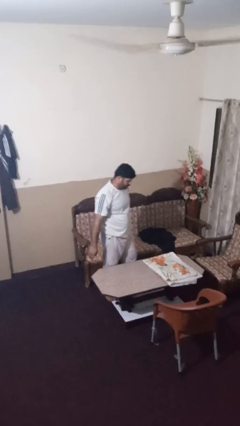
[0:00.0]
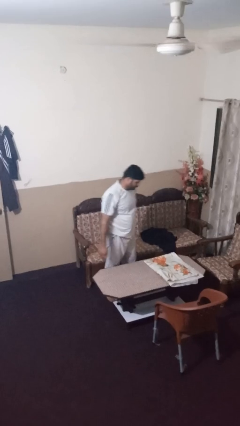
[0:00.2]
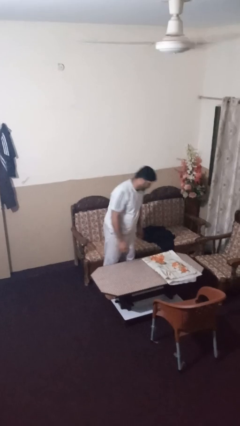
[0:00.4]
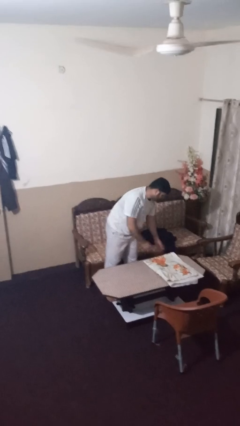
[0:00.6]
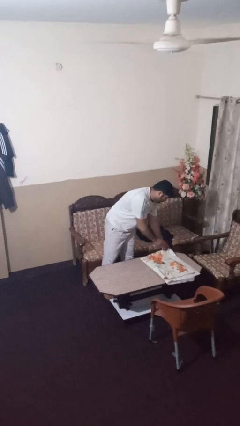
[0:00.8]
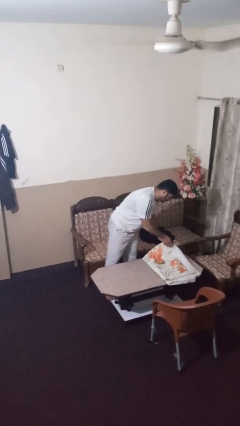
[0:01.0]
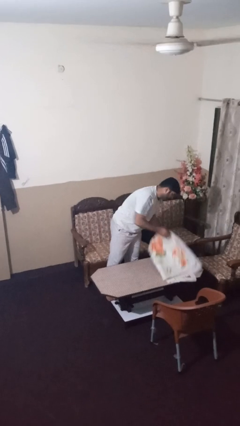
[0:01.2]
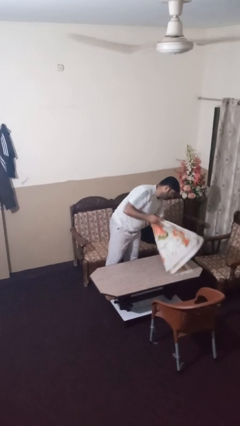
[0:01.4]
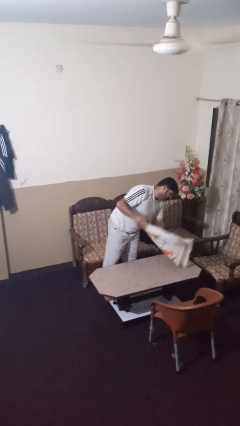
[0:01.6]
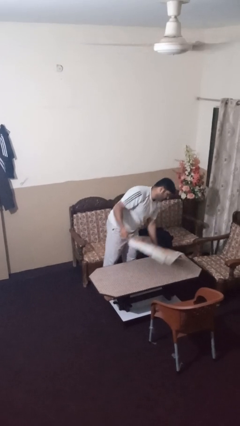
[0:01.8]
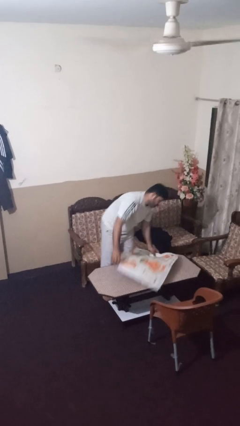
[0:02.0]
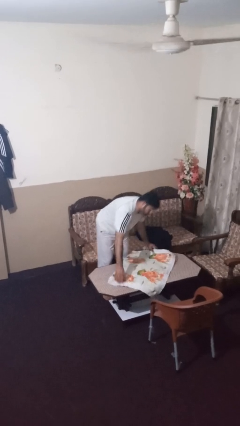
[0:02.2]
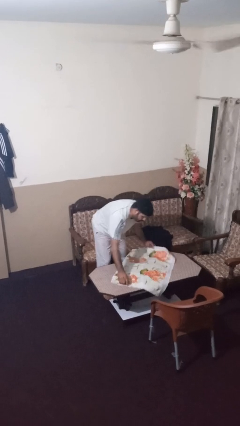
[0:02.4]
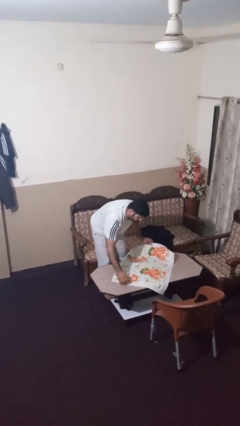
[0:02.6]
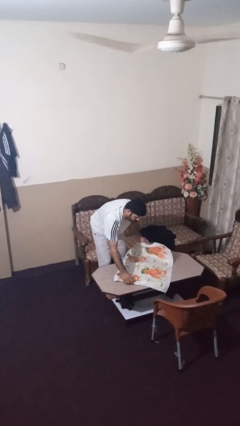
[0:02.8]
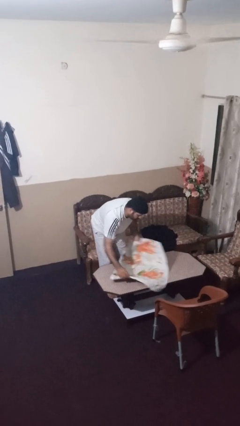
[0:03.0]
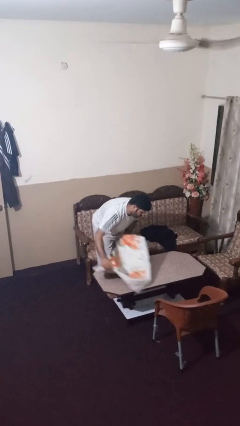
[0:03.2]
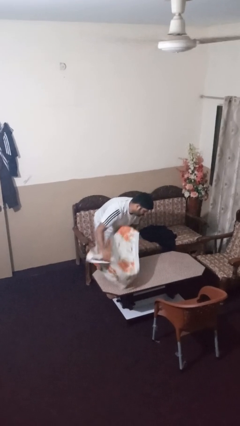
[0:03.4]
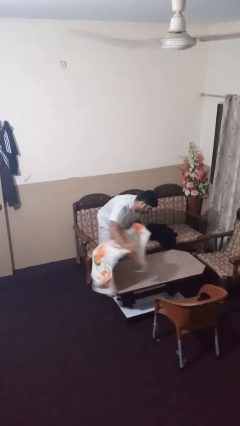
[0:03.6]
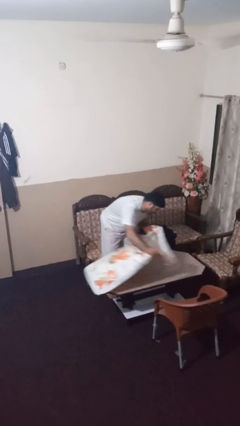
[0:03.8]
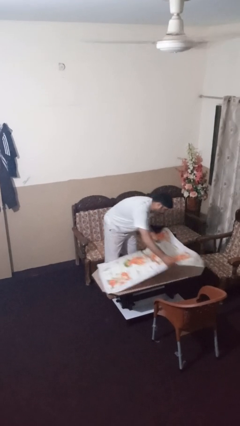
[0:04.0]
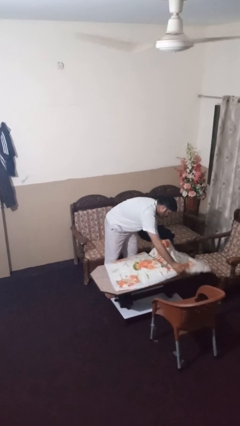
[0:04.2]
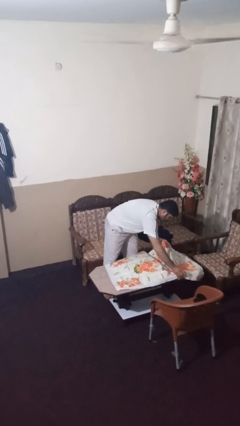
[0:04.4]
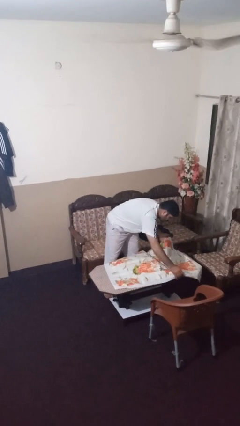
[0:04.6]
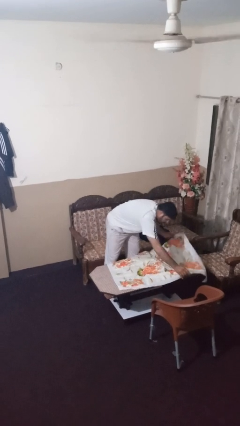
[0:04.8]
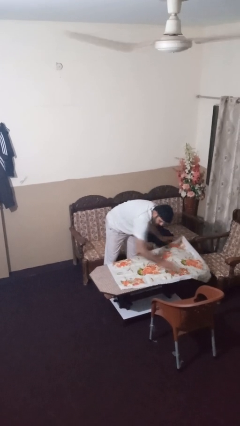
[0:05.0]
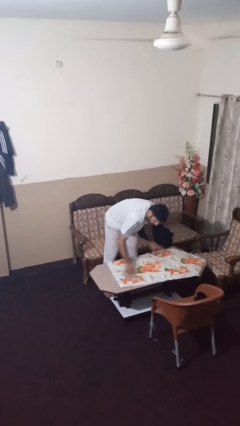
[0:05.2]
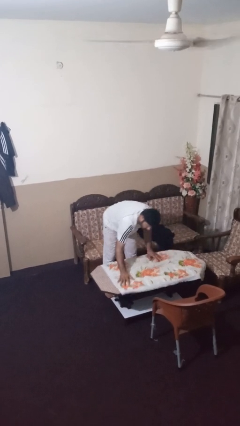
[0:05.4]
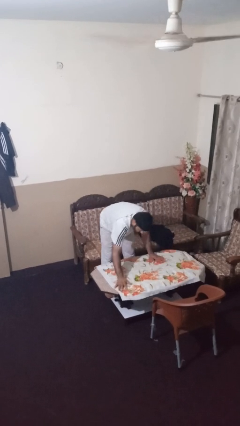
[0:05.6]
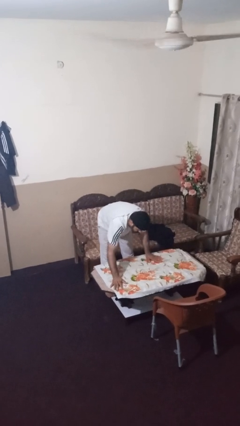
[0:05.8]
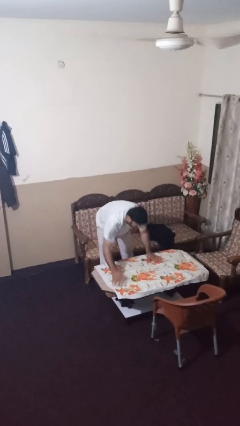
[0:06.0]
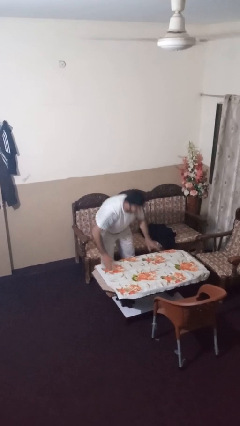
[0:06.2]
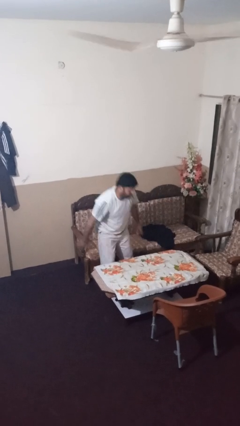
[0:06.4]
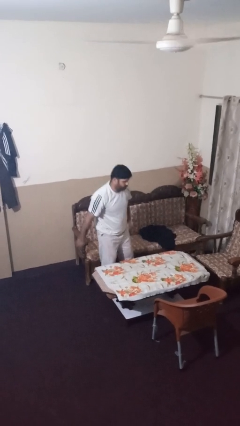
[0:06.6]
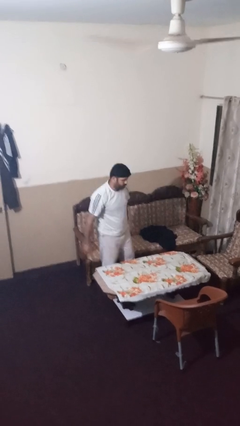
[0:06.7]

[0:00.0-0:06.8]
person spreads tablecloth

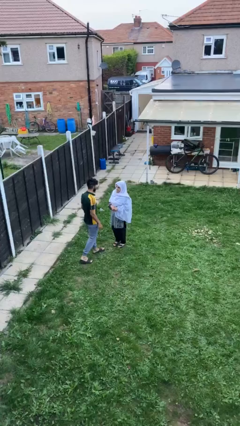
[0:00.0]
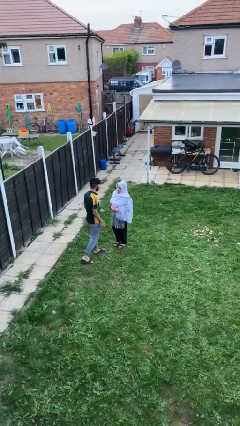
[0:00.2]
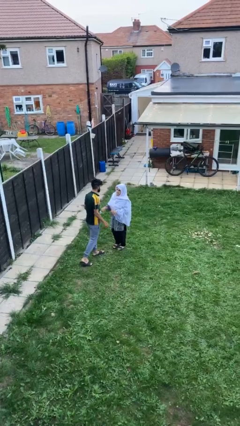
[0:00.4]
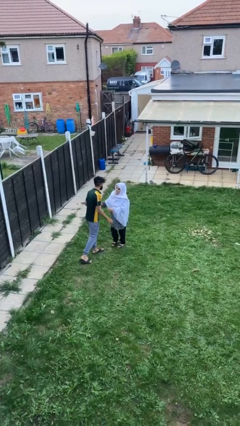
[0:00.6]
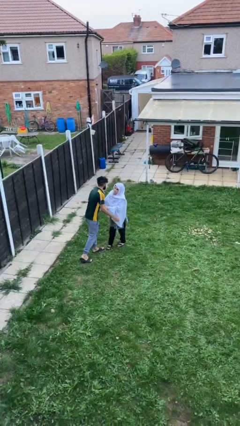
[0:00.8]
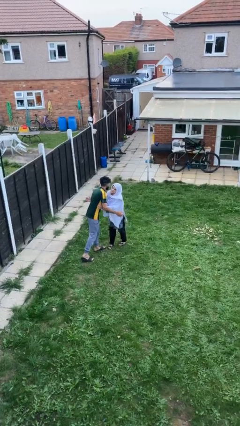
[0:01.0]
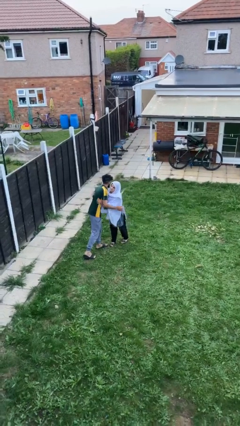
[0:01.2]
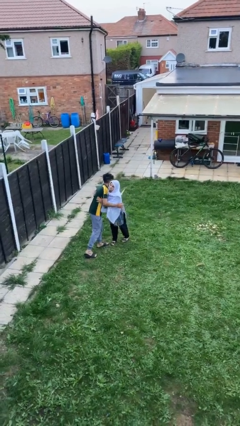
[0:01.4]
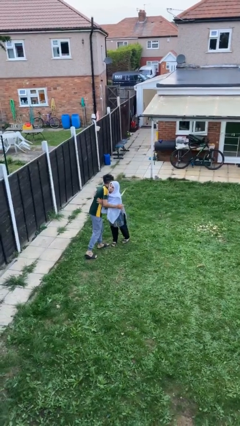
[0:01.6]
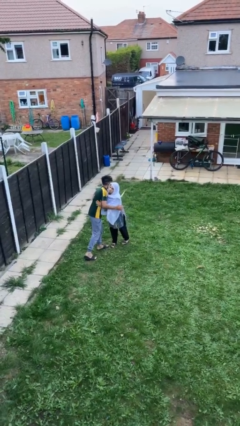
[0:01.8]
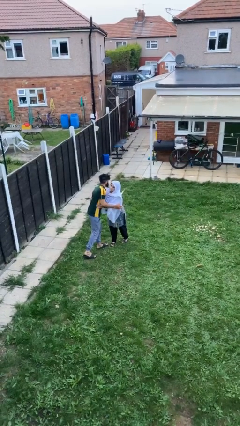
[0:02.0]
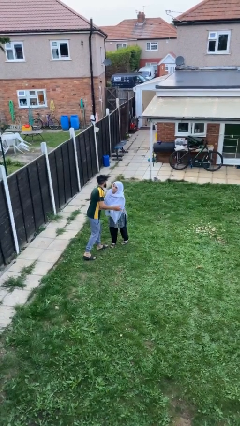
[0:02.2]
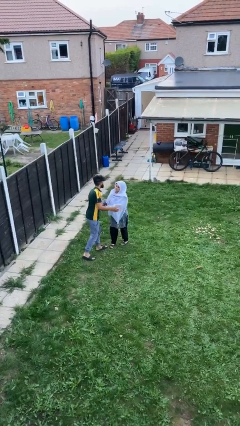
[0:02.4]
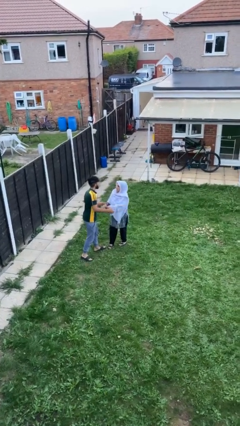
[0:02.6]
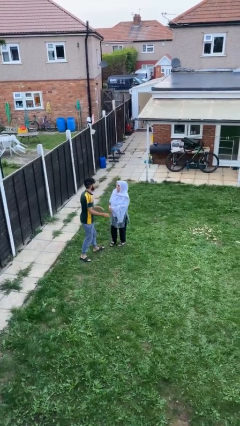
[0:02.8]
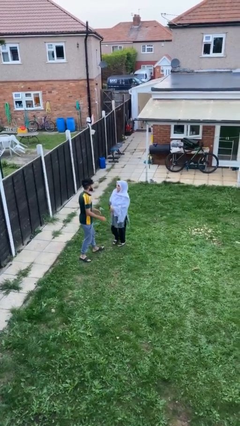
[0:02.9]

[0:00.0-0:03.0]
person embraces person

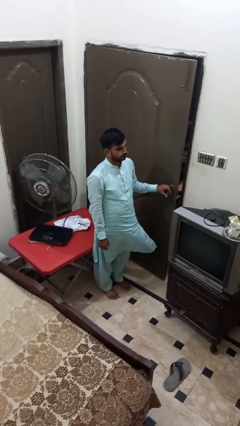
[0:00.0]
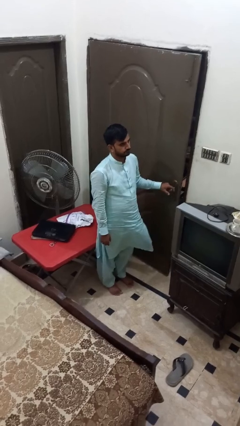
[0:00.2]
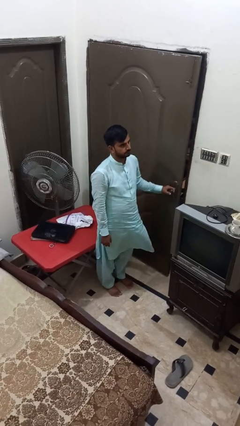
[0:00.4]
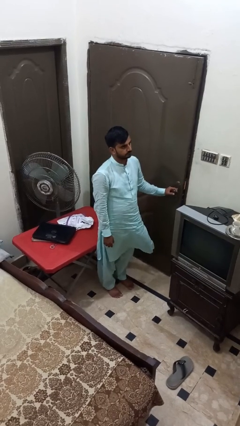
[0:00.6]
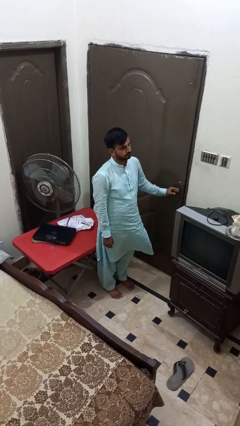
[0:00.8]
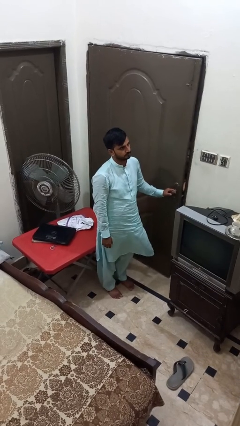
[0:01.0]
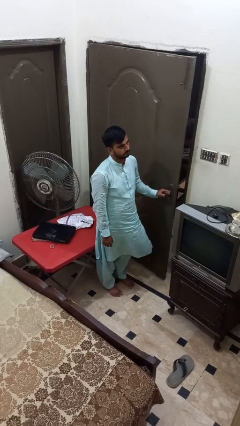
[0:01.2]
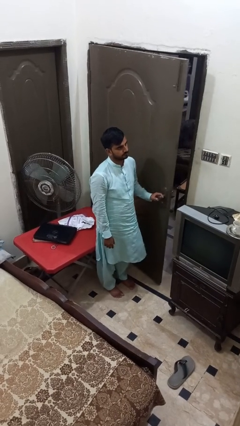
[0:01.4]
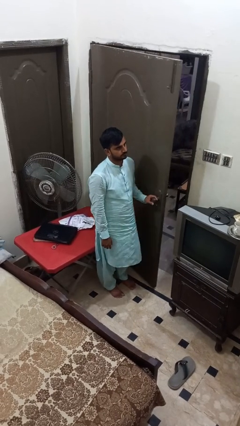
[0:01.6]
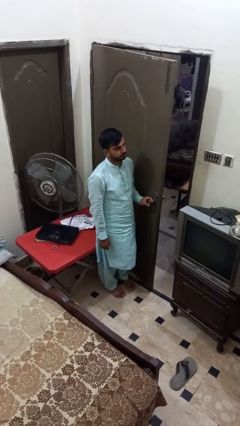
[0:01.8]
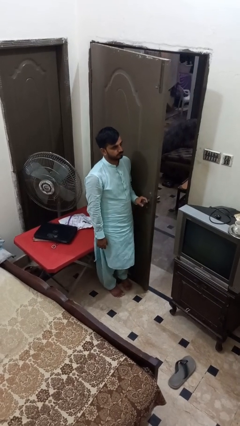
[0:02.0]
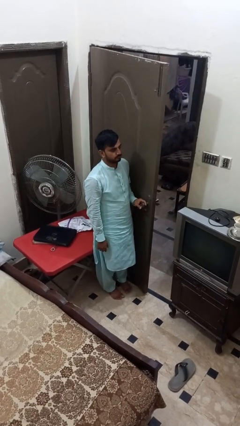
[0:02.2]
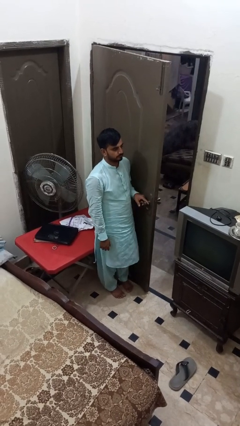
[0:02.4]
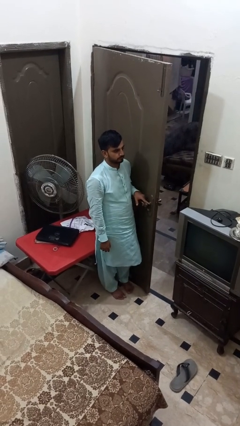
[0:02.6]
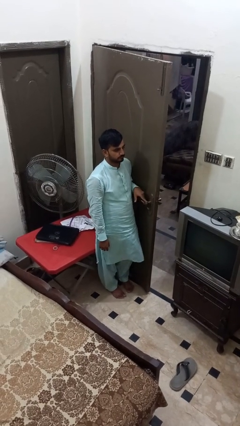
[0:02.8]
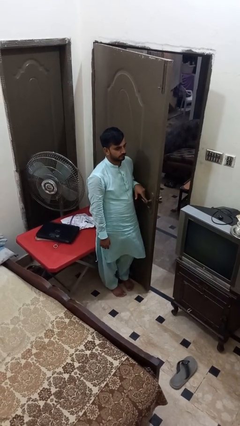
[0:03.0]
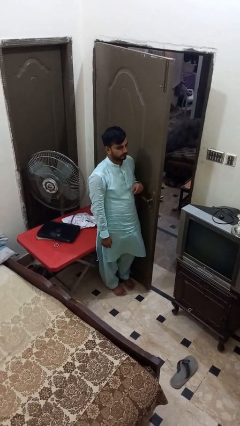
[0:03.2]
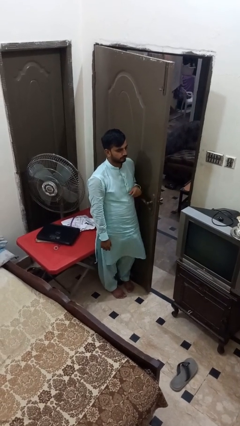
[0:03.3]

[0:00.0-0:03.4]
person opens facility door

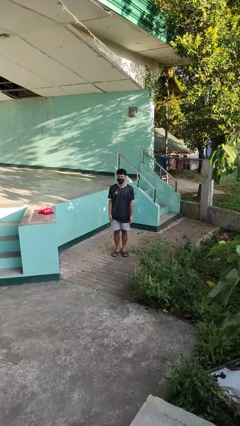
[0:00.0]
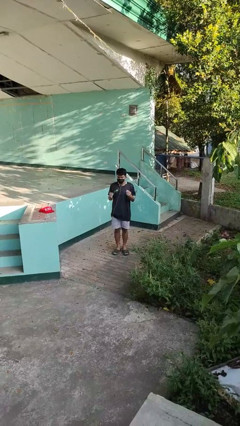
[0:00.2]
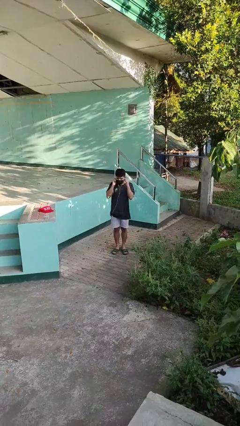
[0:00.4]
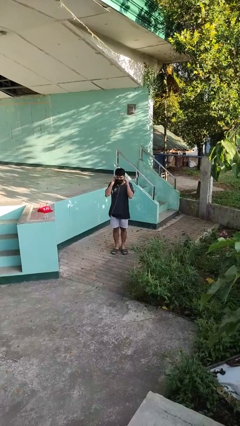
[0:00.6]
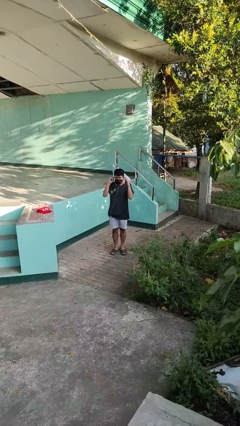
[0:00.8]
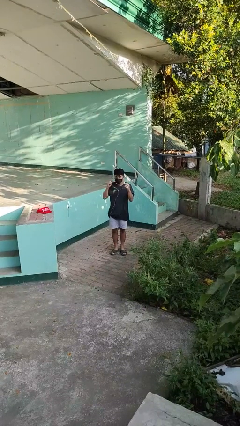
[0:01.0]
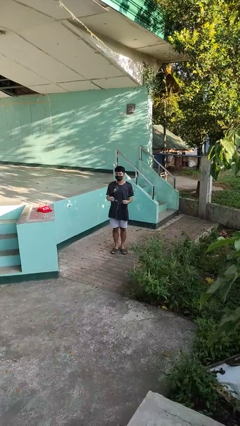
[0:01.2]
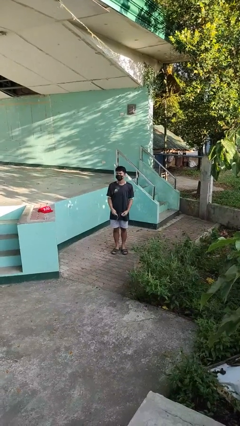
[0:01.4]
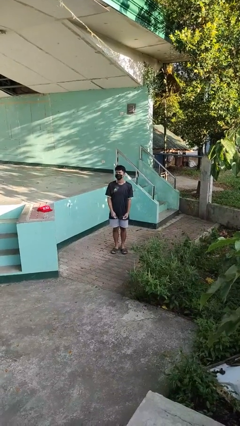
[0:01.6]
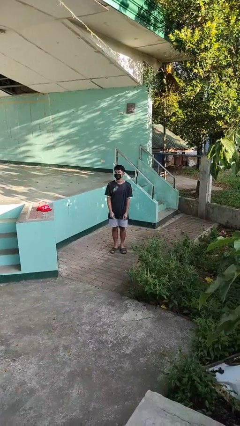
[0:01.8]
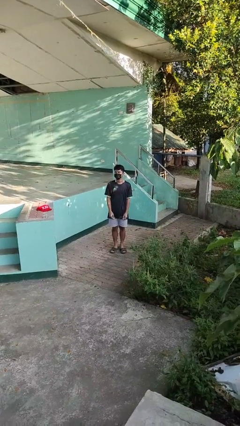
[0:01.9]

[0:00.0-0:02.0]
person takes off headphones

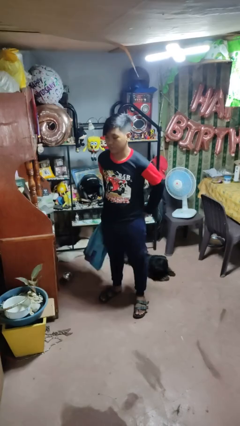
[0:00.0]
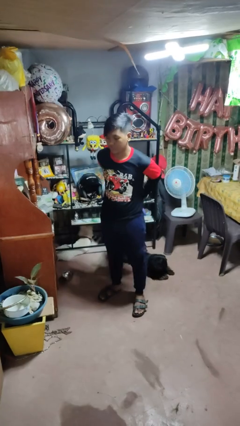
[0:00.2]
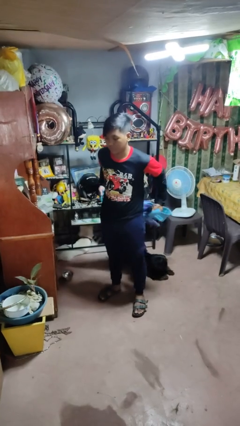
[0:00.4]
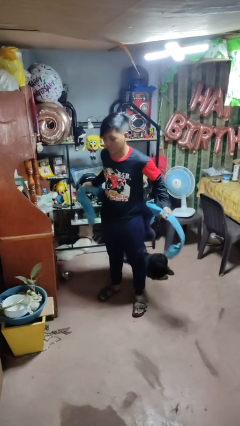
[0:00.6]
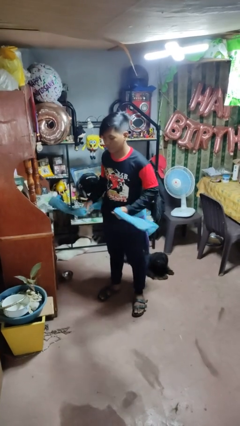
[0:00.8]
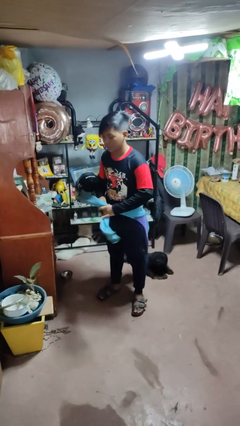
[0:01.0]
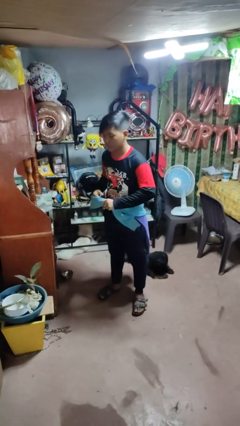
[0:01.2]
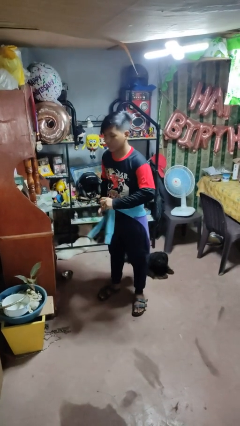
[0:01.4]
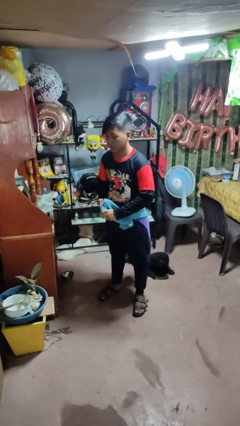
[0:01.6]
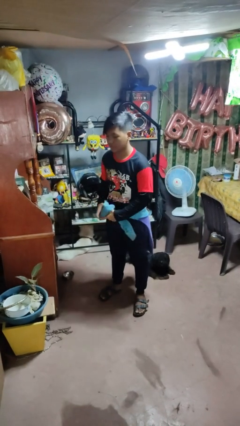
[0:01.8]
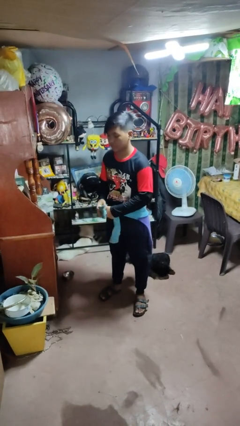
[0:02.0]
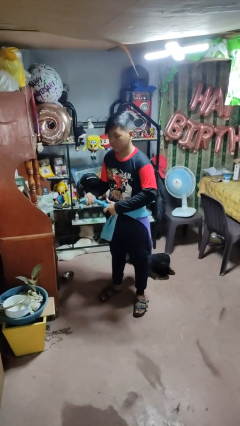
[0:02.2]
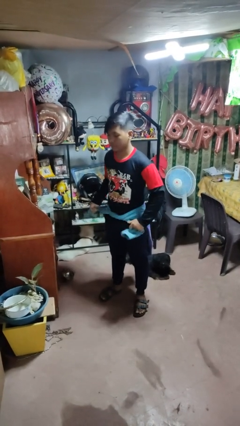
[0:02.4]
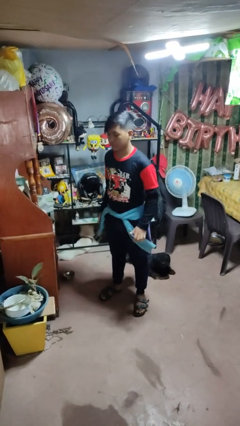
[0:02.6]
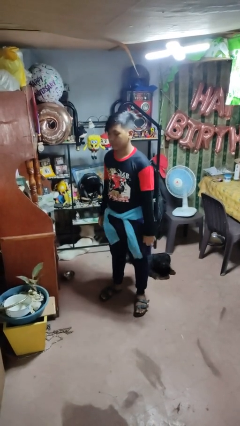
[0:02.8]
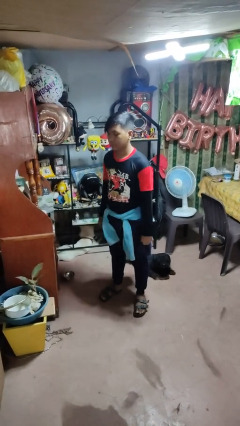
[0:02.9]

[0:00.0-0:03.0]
person ties jacket around waist
